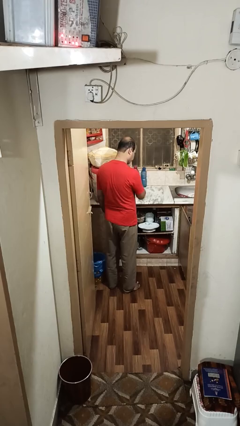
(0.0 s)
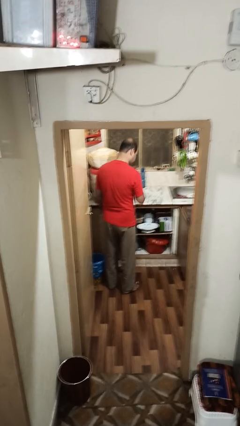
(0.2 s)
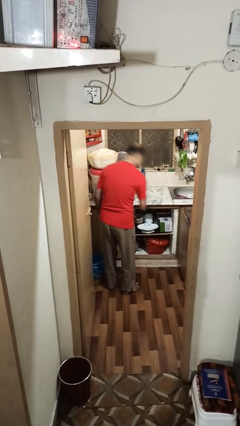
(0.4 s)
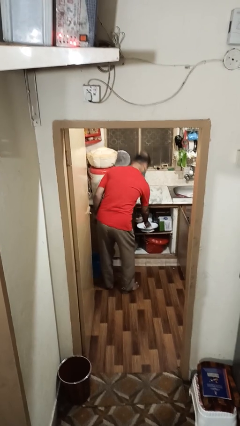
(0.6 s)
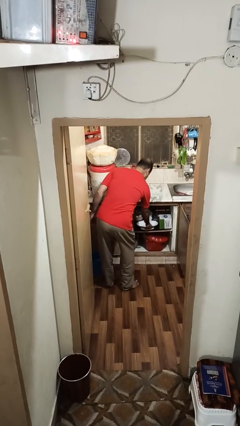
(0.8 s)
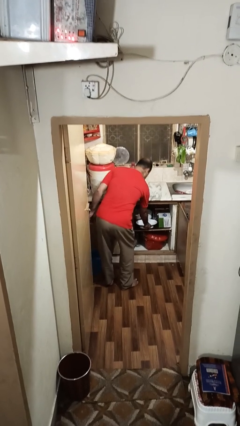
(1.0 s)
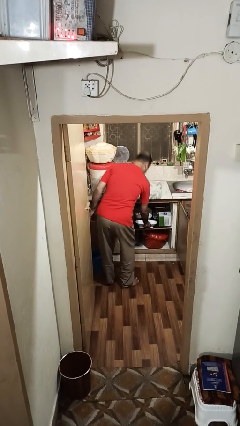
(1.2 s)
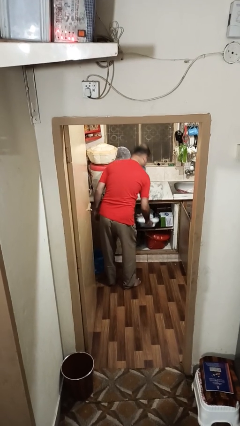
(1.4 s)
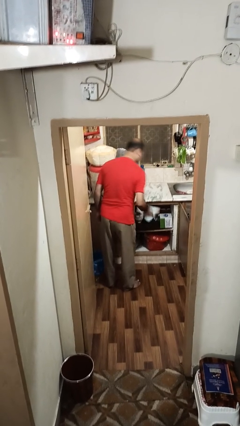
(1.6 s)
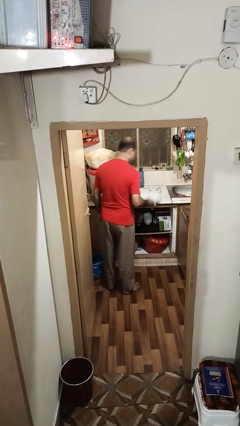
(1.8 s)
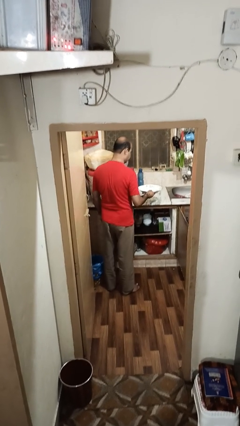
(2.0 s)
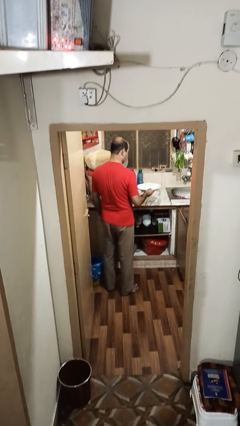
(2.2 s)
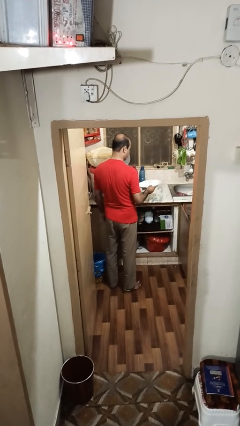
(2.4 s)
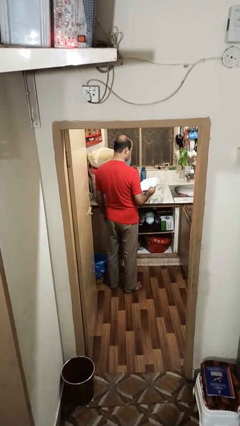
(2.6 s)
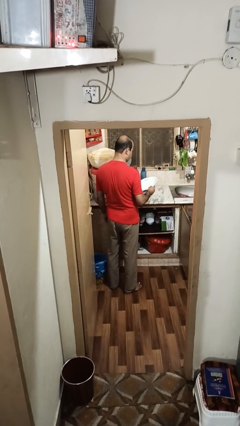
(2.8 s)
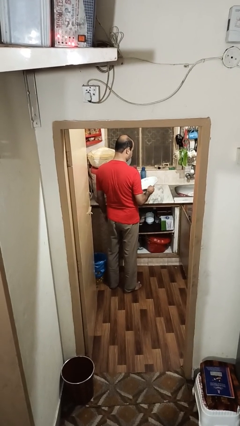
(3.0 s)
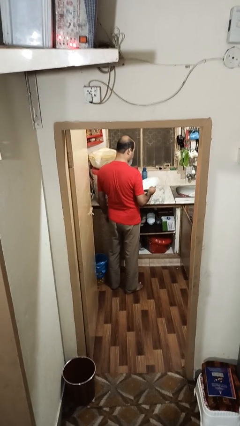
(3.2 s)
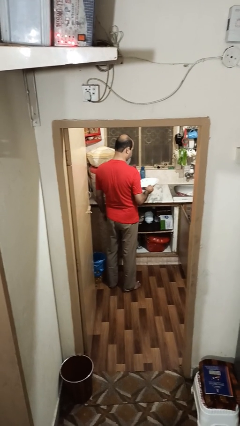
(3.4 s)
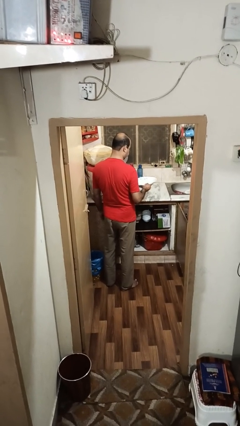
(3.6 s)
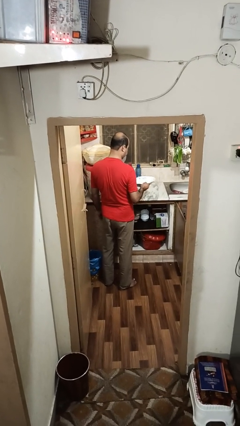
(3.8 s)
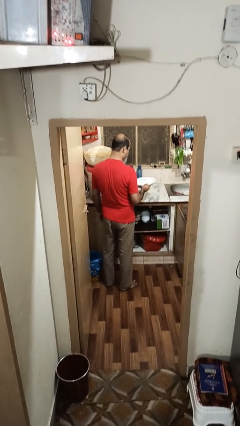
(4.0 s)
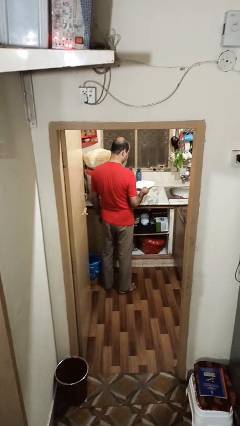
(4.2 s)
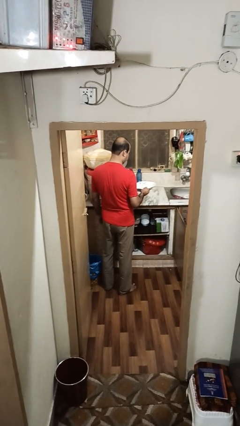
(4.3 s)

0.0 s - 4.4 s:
person picks up object from cabinet

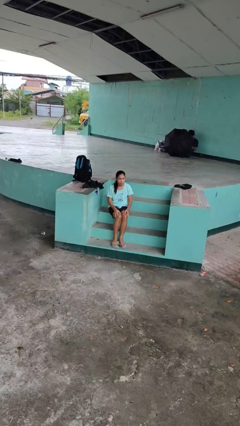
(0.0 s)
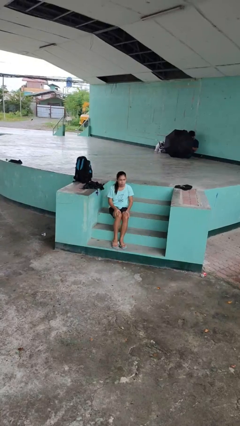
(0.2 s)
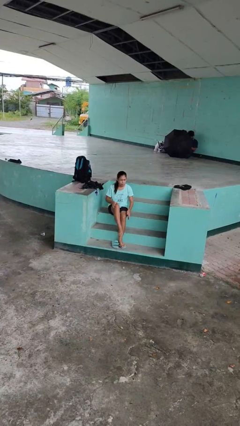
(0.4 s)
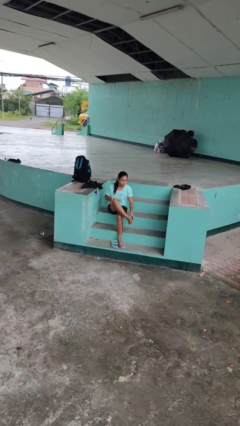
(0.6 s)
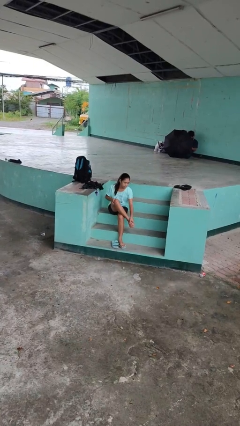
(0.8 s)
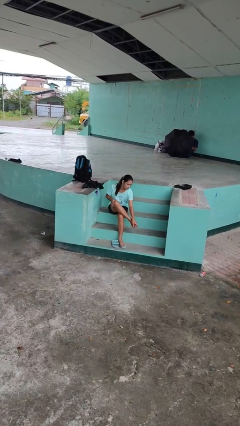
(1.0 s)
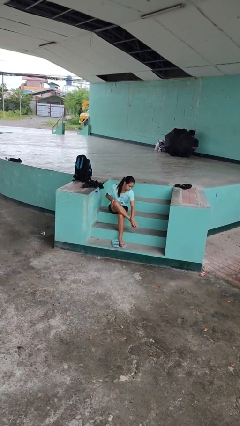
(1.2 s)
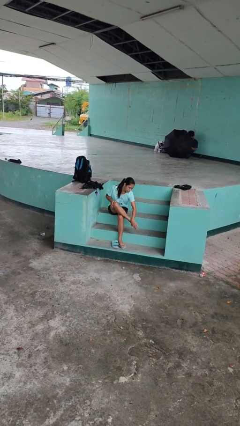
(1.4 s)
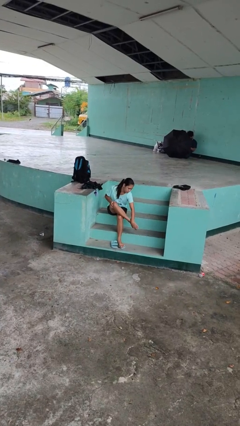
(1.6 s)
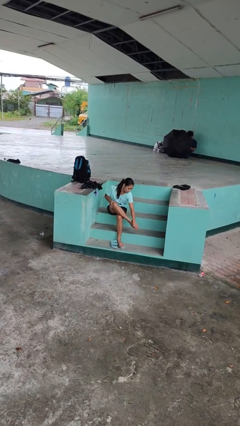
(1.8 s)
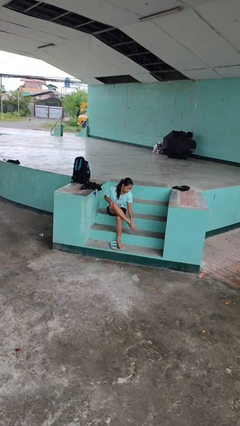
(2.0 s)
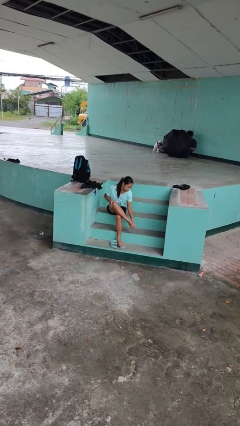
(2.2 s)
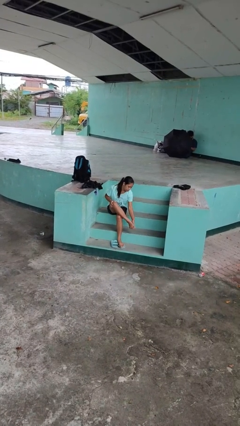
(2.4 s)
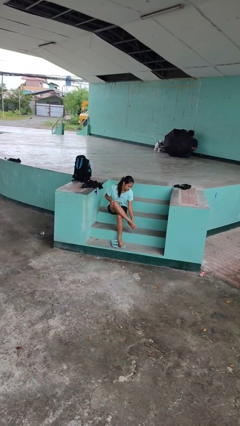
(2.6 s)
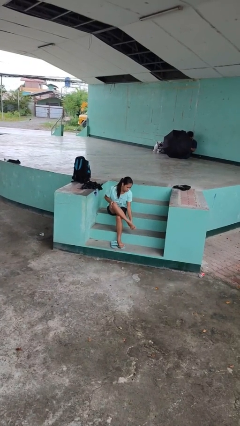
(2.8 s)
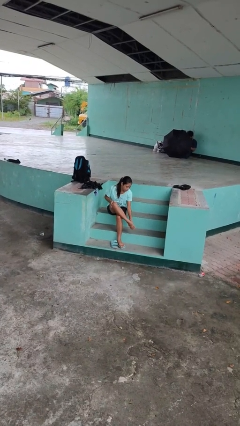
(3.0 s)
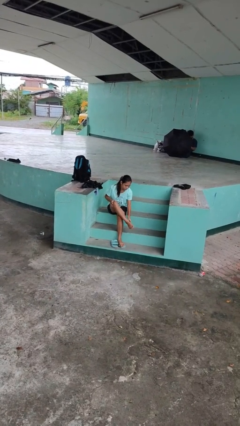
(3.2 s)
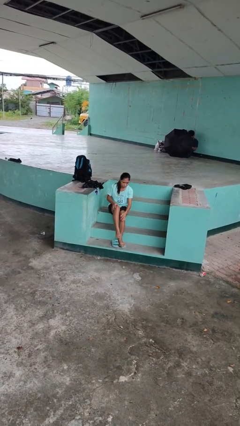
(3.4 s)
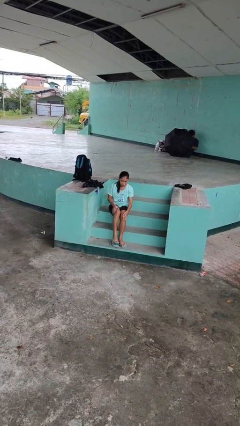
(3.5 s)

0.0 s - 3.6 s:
person rubs foot

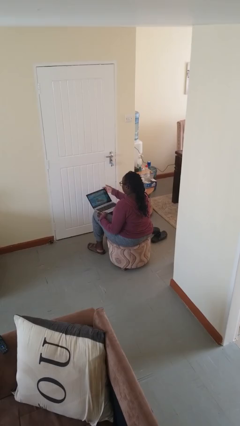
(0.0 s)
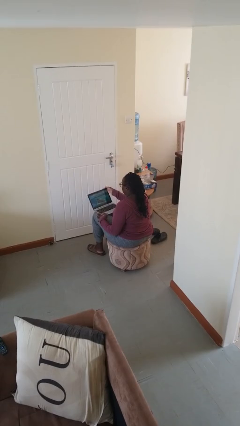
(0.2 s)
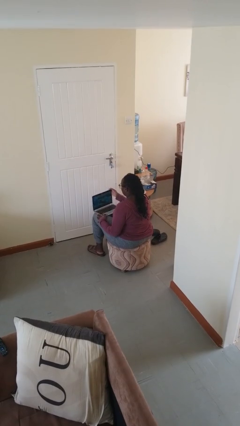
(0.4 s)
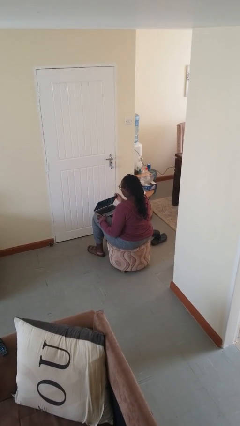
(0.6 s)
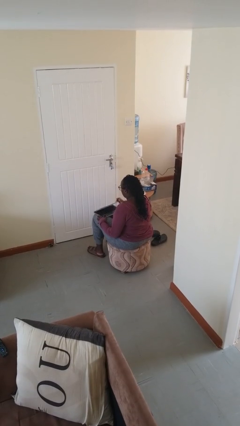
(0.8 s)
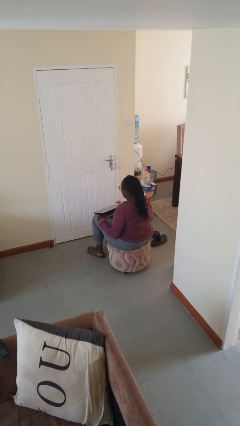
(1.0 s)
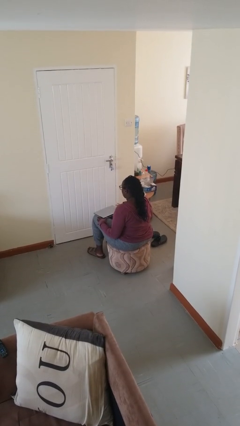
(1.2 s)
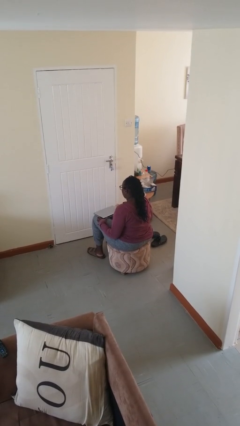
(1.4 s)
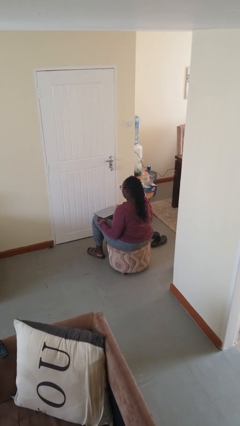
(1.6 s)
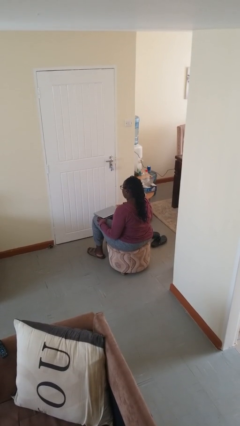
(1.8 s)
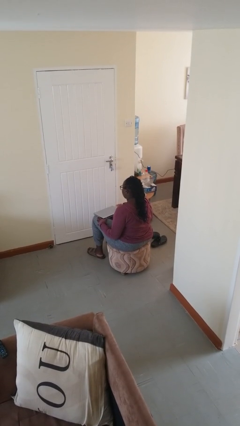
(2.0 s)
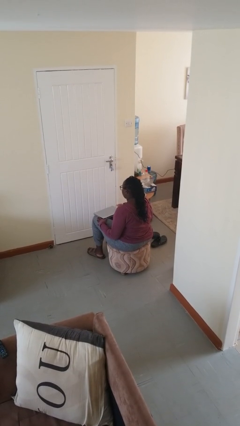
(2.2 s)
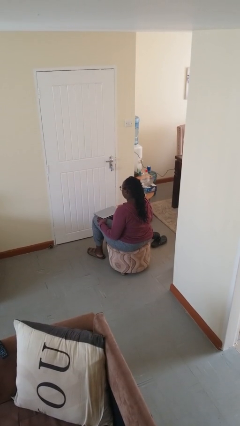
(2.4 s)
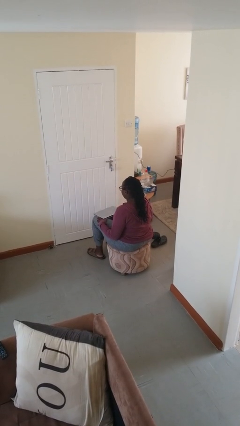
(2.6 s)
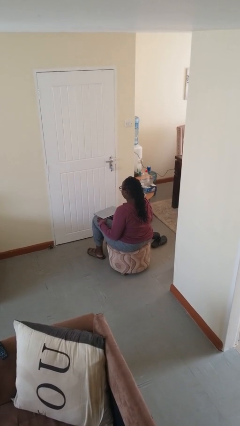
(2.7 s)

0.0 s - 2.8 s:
person closes laptop

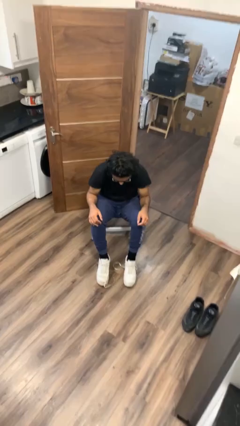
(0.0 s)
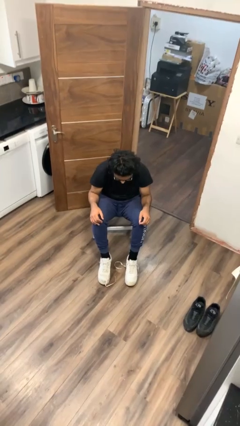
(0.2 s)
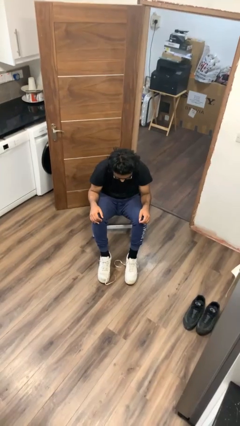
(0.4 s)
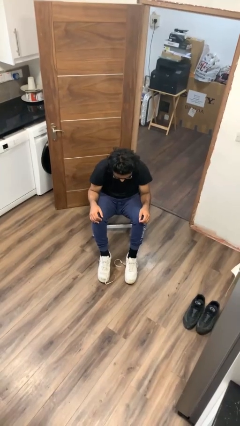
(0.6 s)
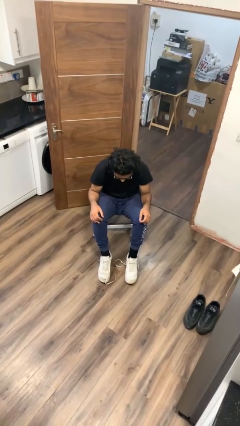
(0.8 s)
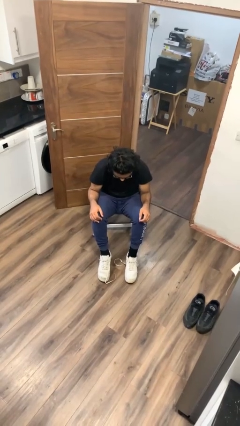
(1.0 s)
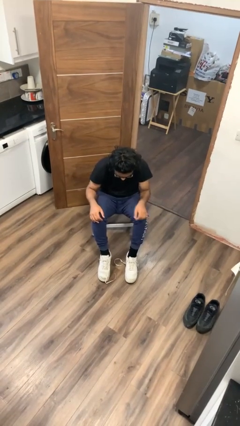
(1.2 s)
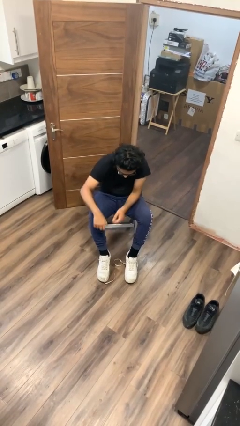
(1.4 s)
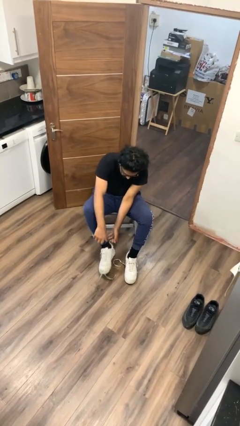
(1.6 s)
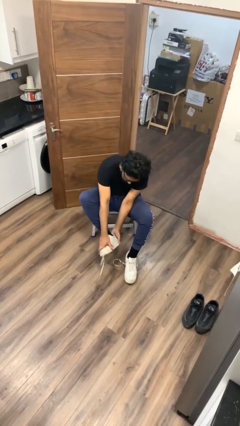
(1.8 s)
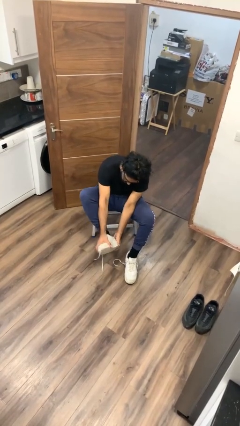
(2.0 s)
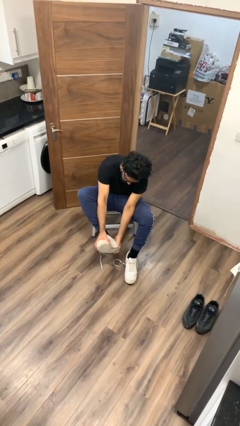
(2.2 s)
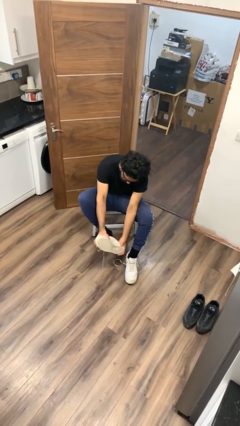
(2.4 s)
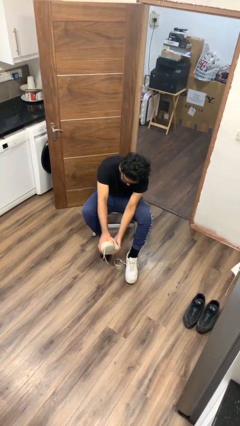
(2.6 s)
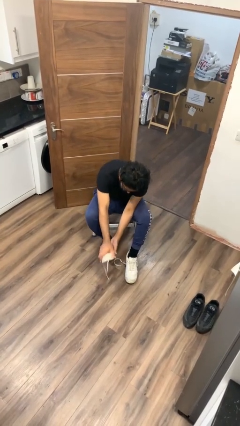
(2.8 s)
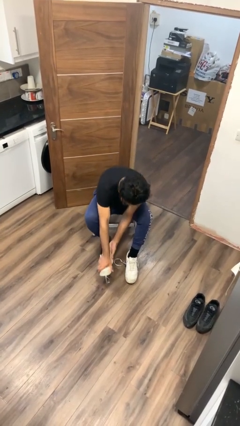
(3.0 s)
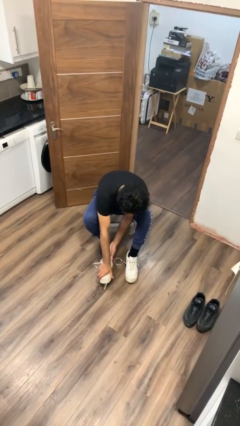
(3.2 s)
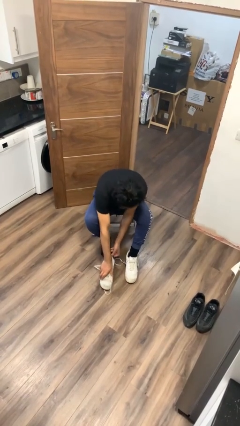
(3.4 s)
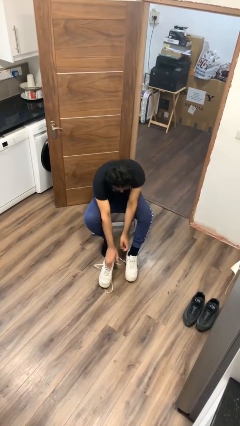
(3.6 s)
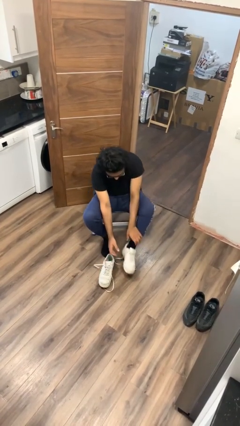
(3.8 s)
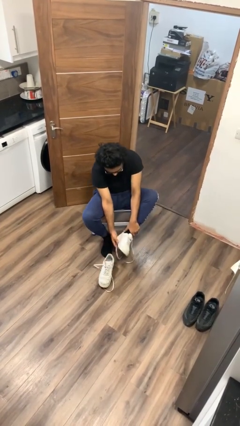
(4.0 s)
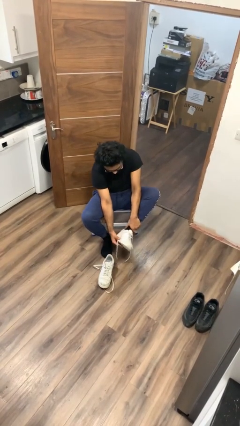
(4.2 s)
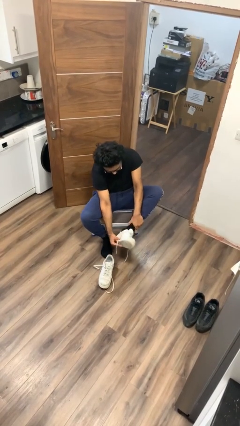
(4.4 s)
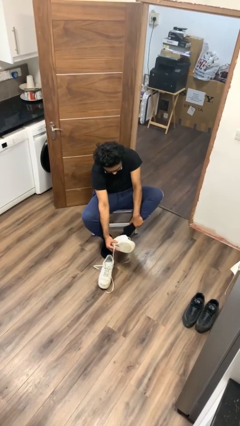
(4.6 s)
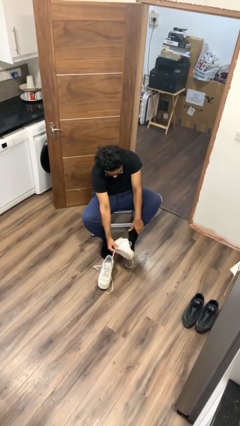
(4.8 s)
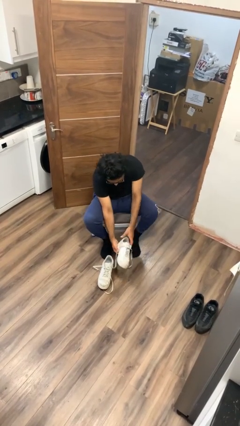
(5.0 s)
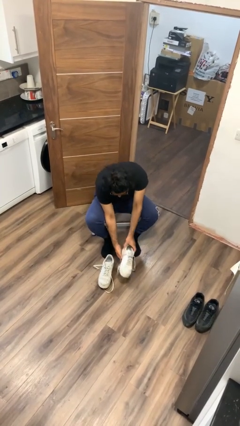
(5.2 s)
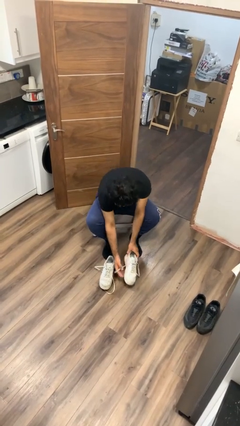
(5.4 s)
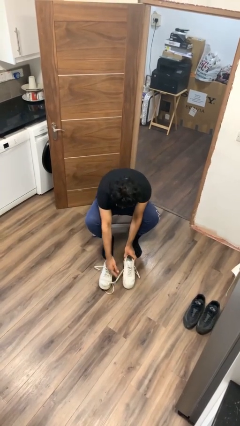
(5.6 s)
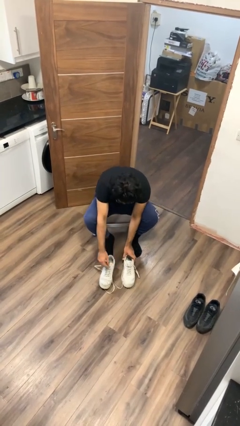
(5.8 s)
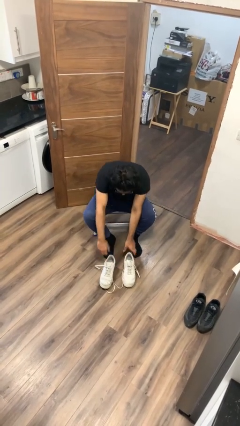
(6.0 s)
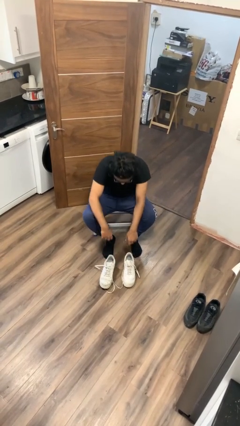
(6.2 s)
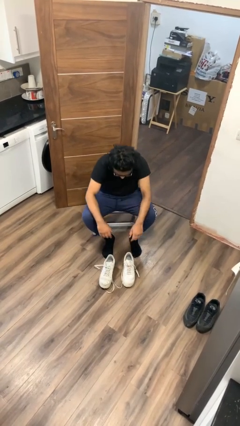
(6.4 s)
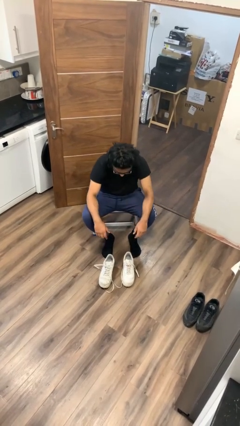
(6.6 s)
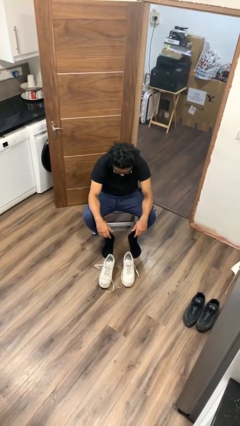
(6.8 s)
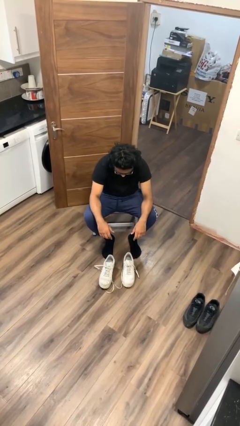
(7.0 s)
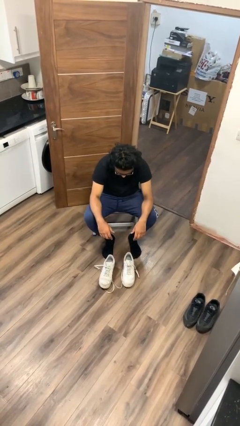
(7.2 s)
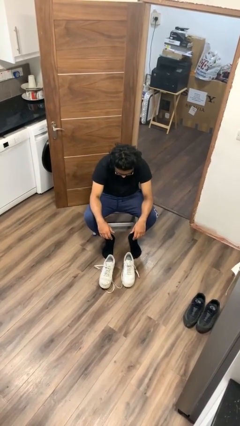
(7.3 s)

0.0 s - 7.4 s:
person takes off shoes
